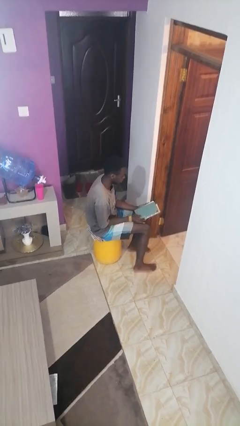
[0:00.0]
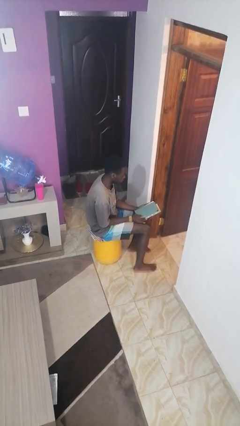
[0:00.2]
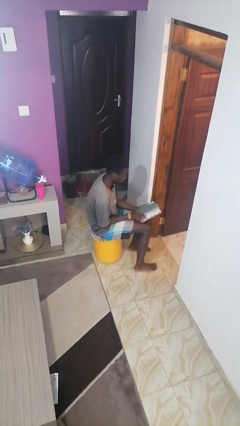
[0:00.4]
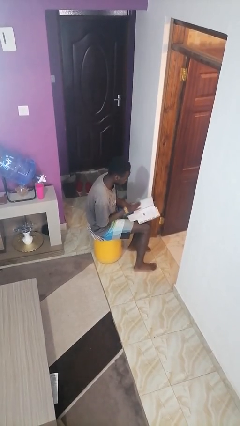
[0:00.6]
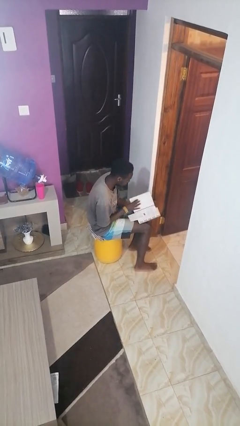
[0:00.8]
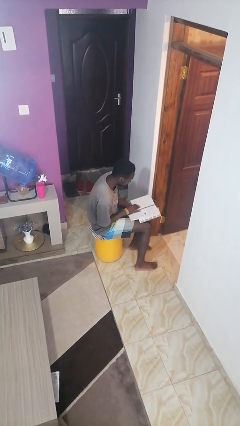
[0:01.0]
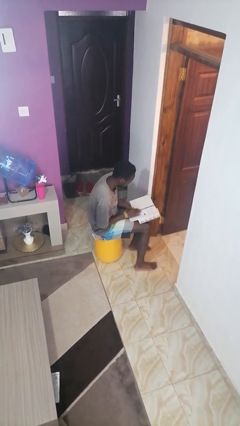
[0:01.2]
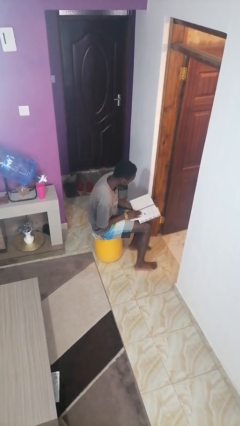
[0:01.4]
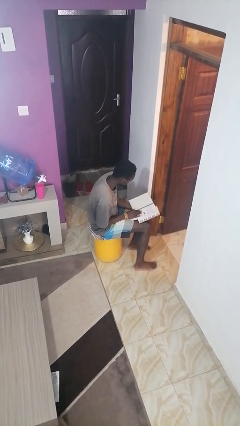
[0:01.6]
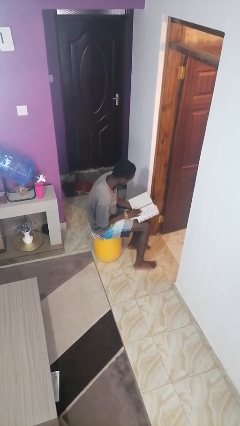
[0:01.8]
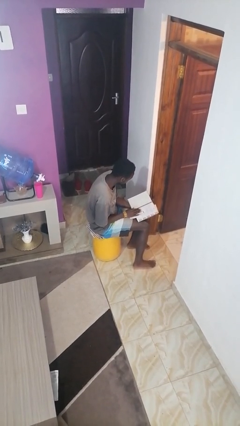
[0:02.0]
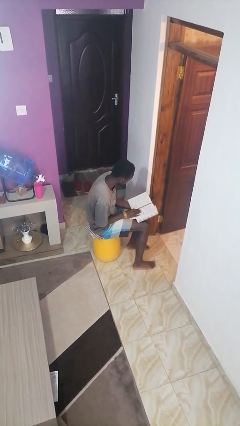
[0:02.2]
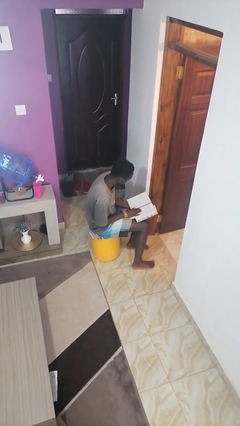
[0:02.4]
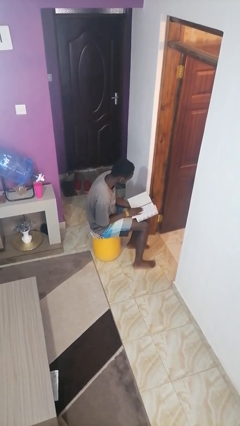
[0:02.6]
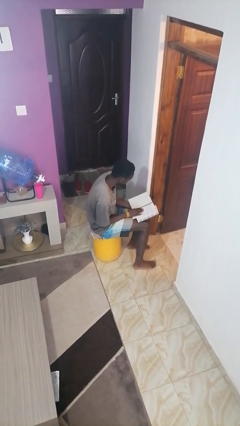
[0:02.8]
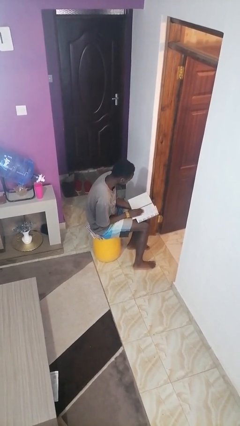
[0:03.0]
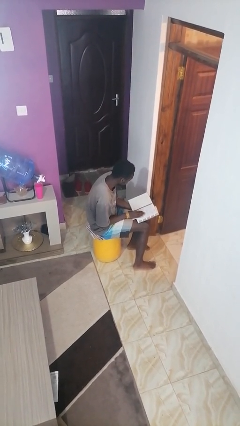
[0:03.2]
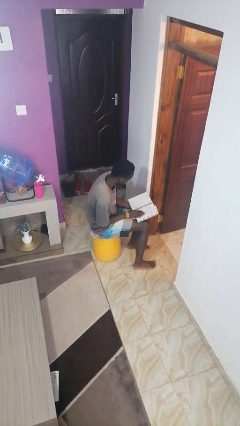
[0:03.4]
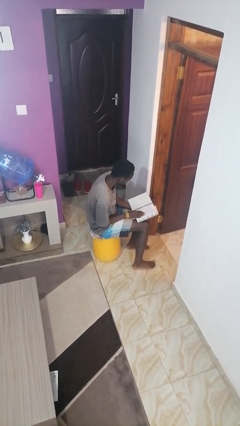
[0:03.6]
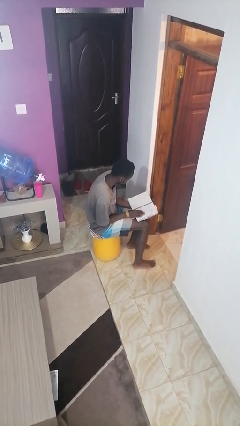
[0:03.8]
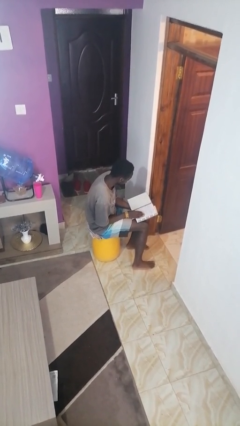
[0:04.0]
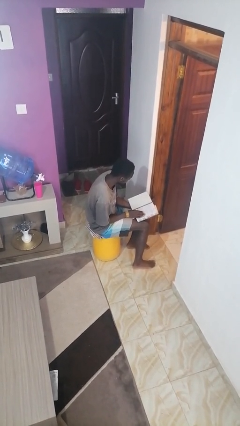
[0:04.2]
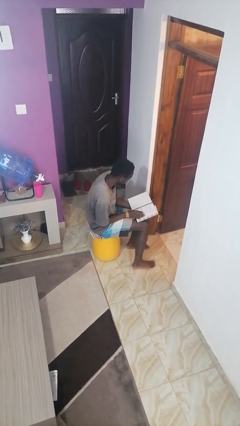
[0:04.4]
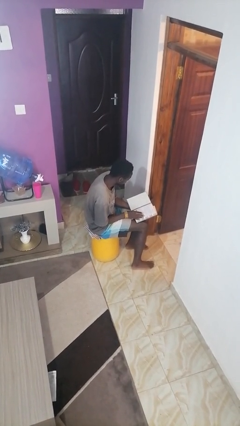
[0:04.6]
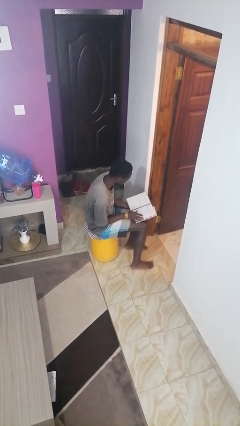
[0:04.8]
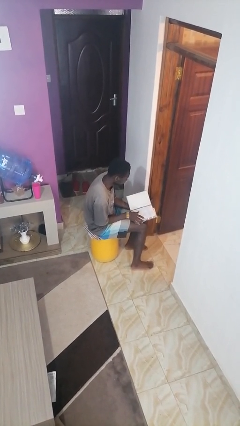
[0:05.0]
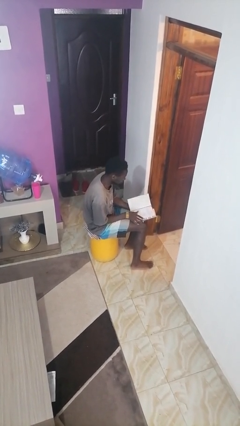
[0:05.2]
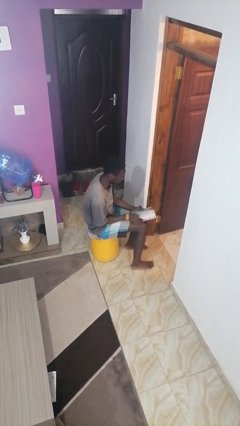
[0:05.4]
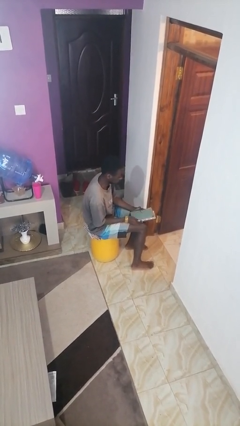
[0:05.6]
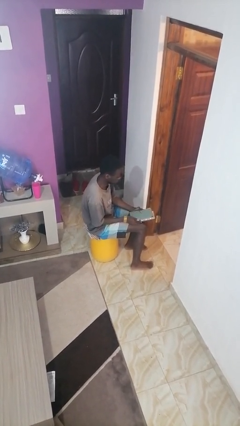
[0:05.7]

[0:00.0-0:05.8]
person reads book

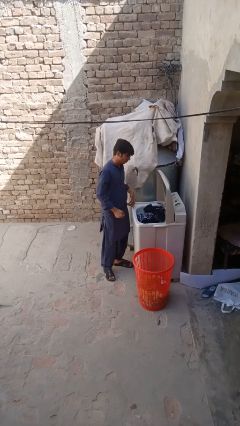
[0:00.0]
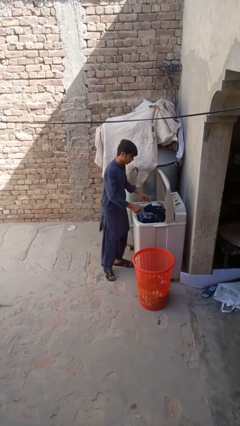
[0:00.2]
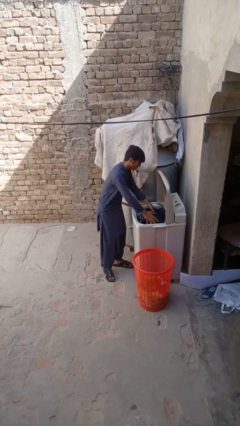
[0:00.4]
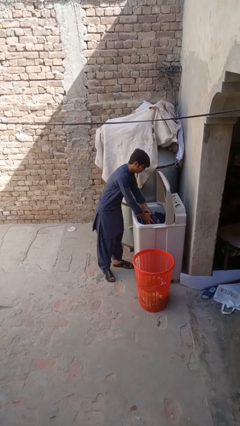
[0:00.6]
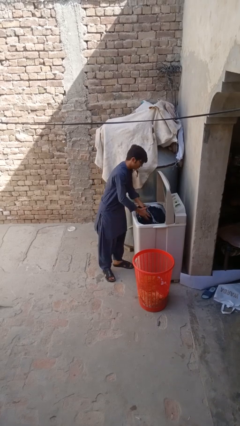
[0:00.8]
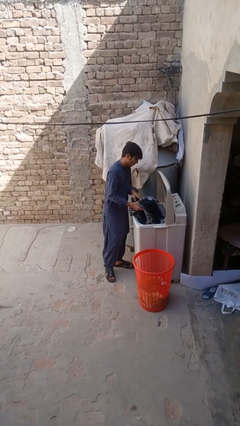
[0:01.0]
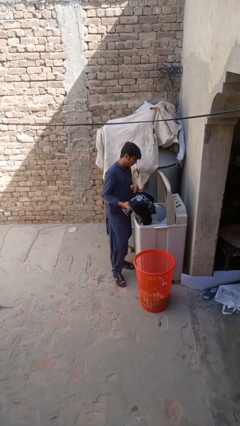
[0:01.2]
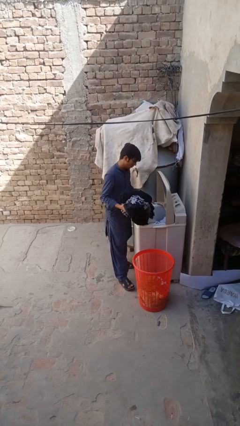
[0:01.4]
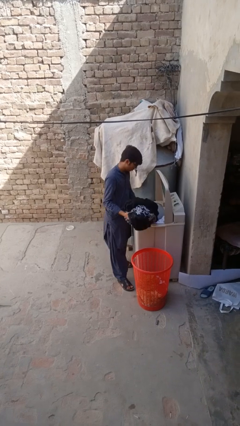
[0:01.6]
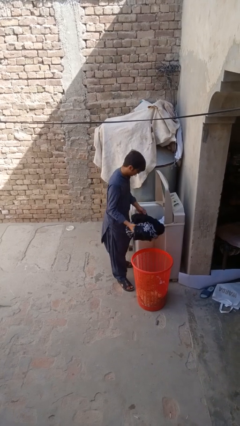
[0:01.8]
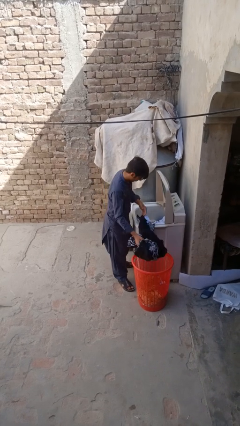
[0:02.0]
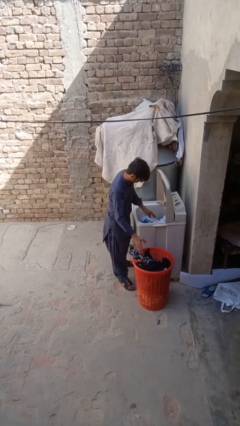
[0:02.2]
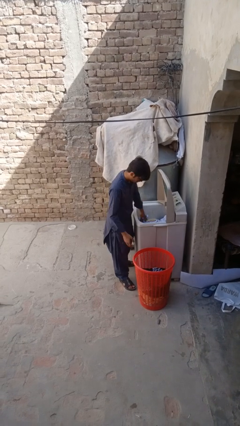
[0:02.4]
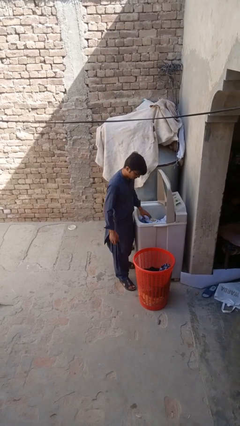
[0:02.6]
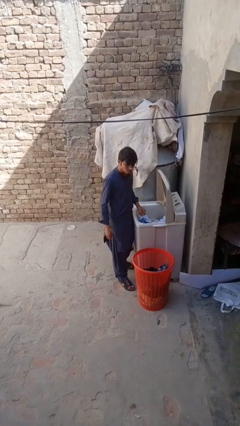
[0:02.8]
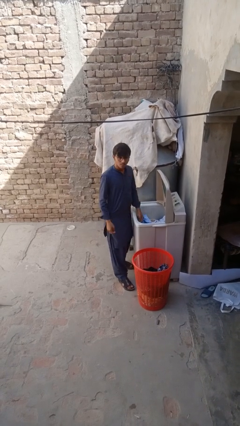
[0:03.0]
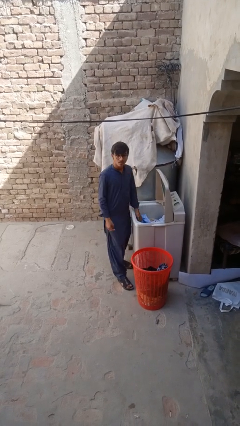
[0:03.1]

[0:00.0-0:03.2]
person unloads clotheswasher

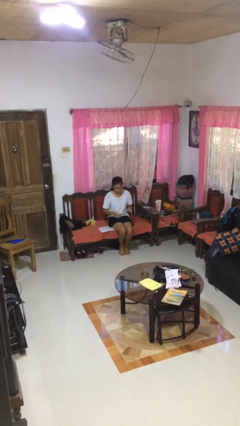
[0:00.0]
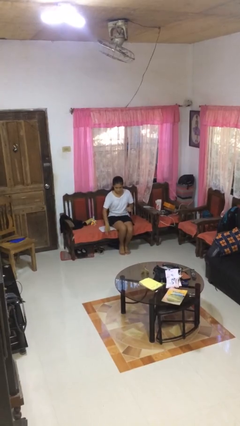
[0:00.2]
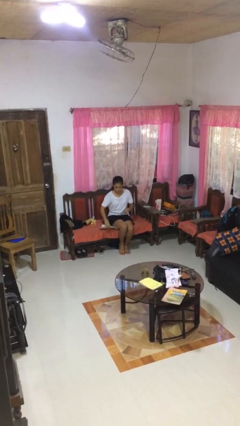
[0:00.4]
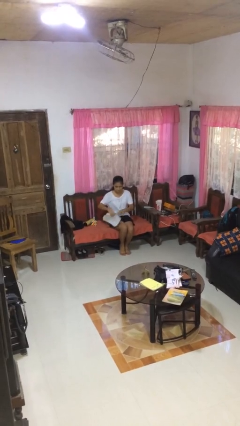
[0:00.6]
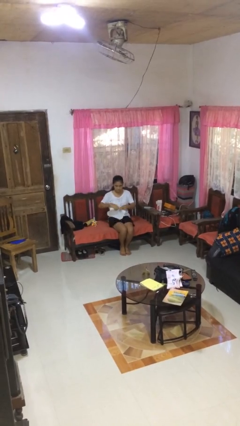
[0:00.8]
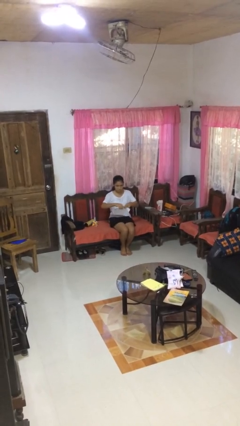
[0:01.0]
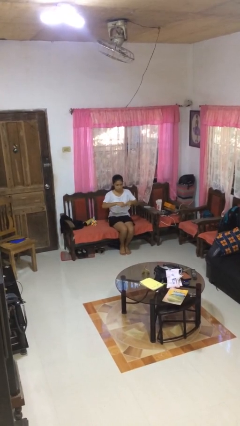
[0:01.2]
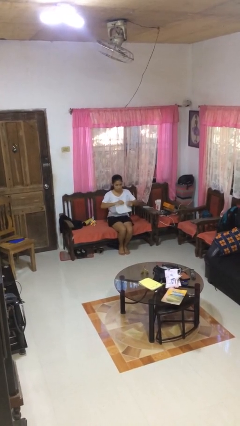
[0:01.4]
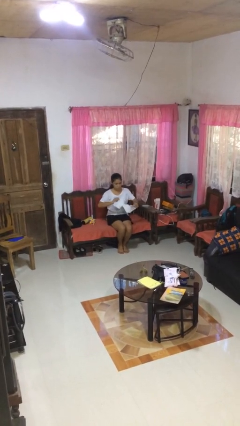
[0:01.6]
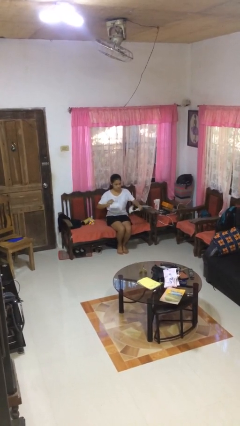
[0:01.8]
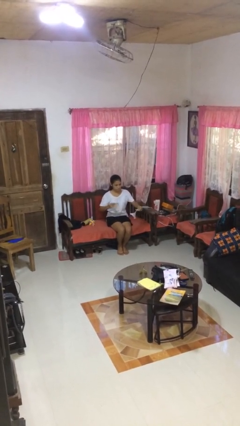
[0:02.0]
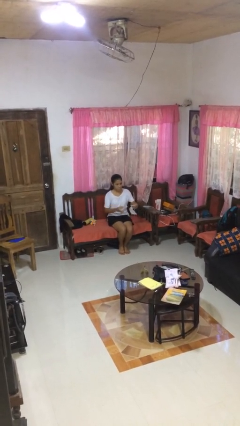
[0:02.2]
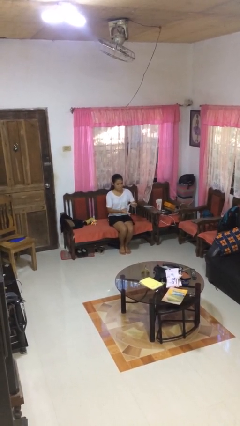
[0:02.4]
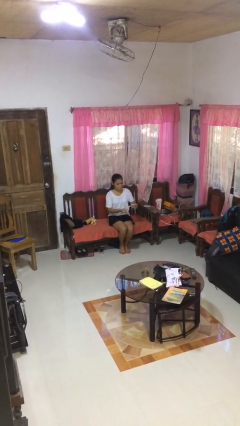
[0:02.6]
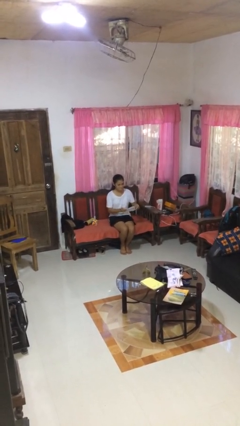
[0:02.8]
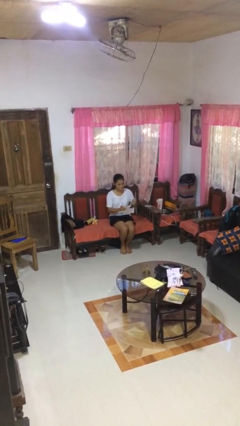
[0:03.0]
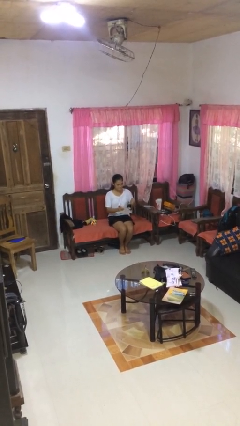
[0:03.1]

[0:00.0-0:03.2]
person tears paper

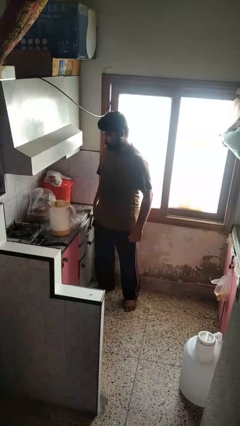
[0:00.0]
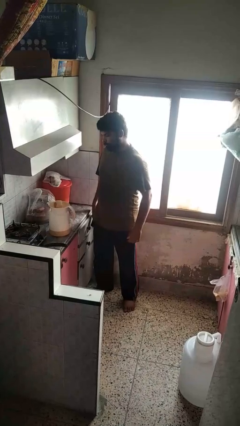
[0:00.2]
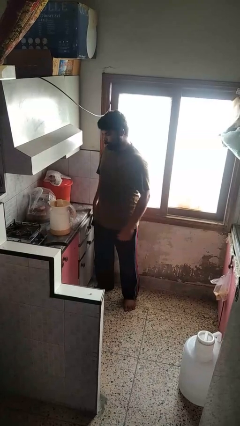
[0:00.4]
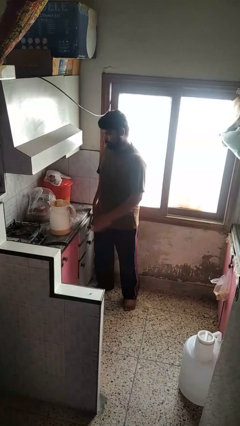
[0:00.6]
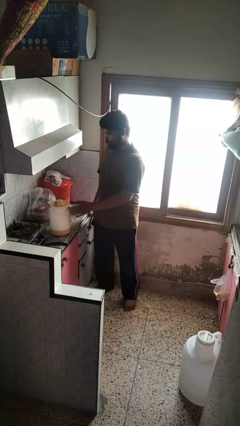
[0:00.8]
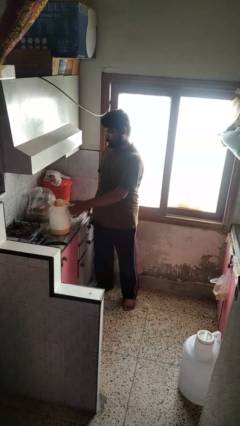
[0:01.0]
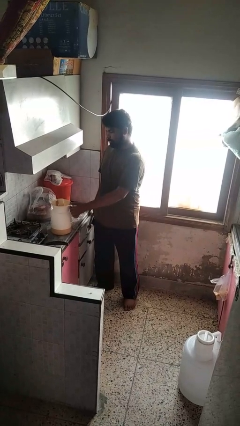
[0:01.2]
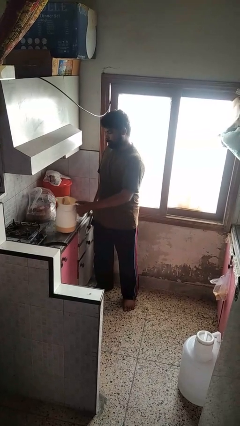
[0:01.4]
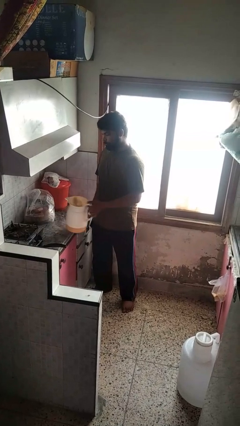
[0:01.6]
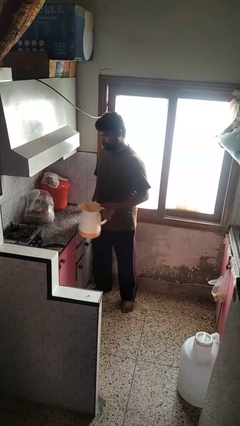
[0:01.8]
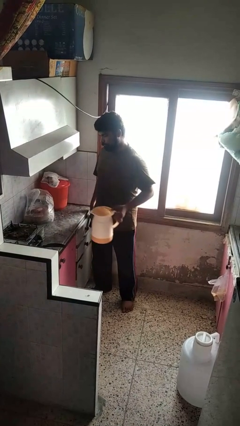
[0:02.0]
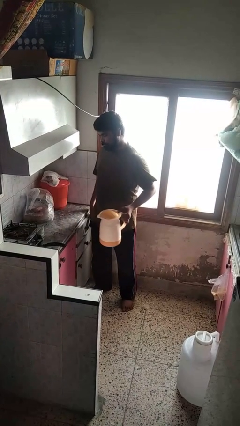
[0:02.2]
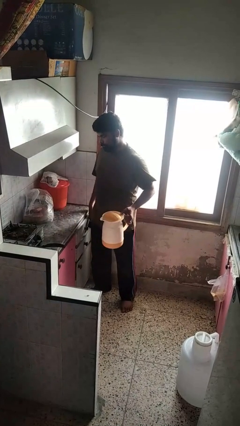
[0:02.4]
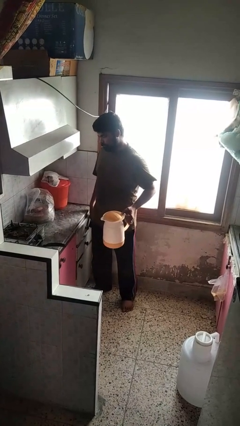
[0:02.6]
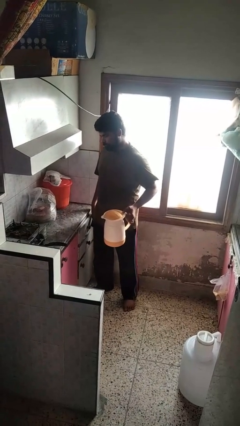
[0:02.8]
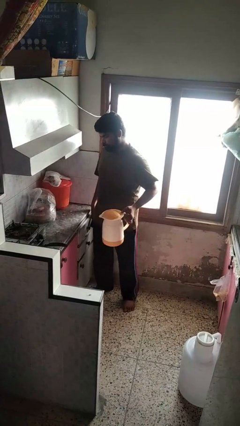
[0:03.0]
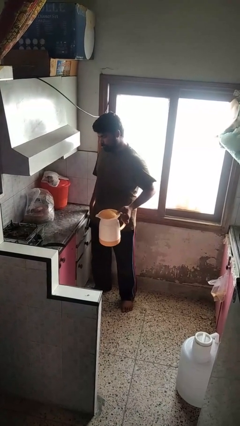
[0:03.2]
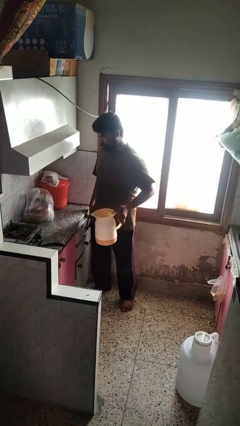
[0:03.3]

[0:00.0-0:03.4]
person picks up object from countertop

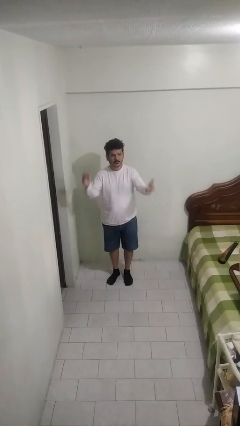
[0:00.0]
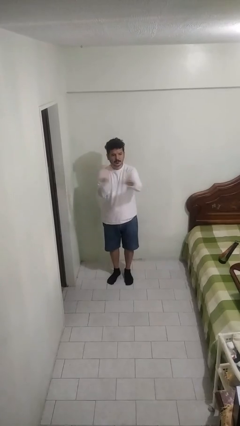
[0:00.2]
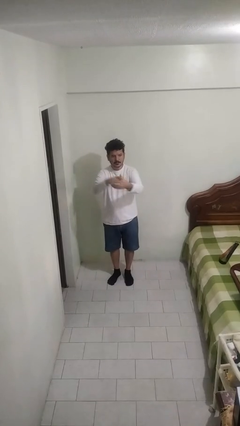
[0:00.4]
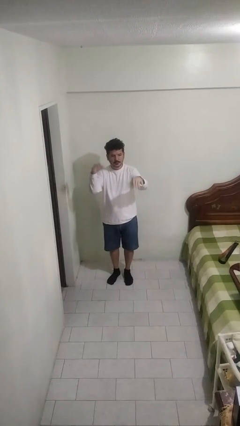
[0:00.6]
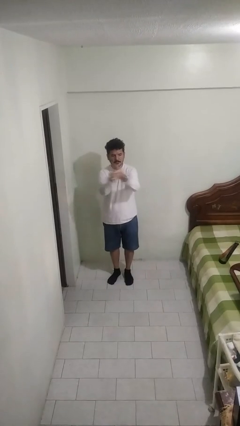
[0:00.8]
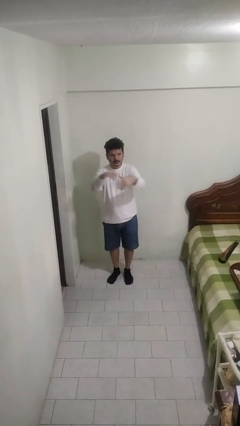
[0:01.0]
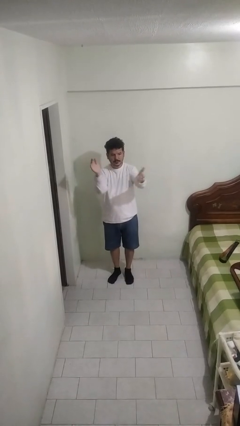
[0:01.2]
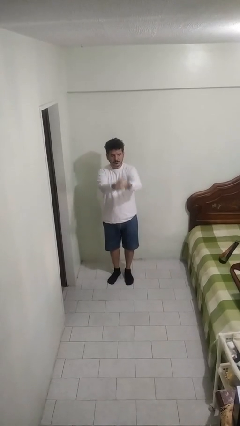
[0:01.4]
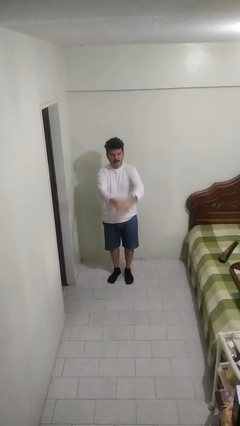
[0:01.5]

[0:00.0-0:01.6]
person claps hands

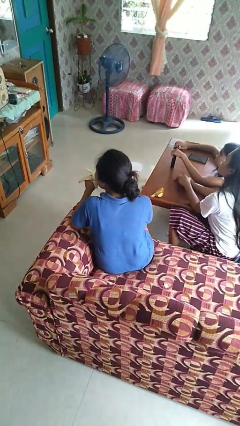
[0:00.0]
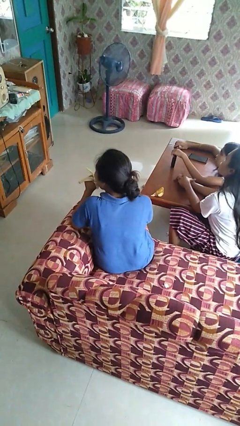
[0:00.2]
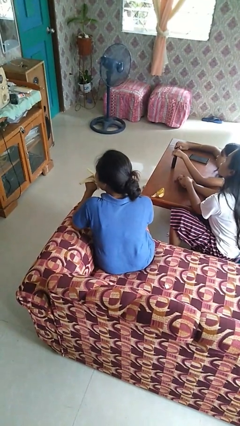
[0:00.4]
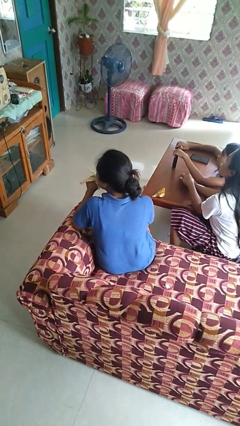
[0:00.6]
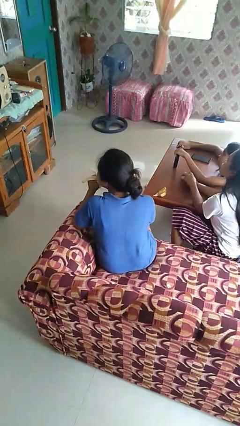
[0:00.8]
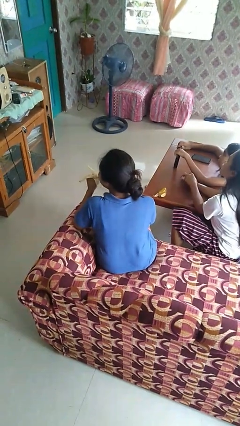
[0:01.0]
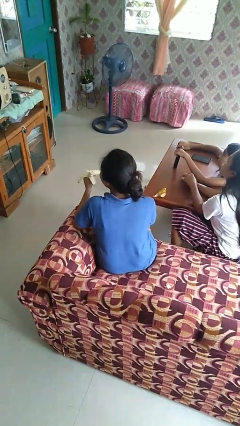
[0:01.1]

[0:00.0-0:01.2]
person eats banana
